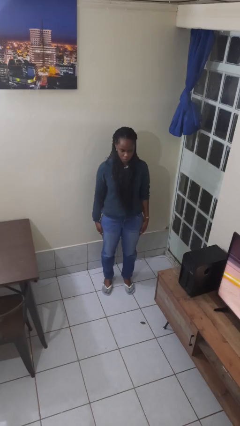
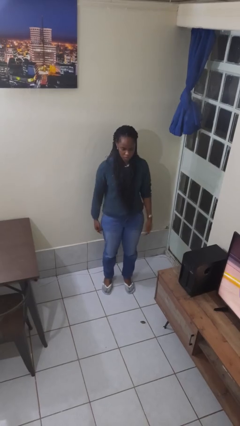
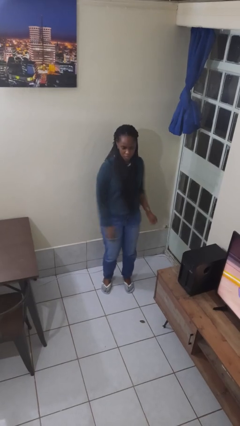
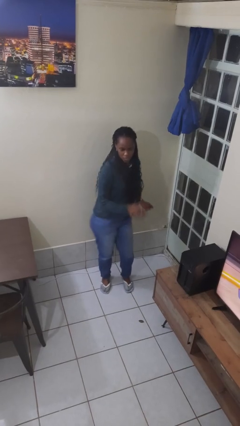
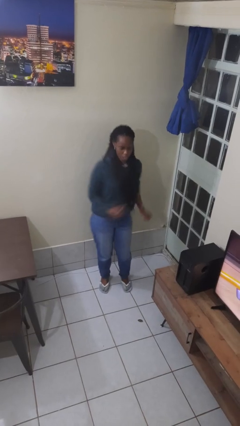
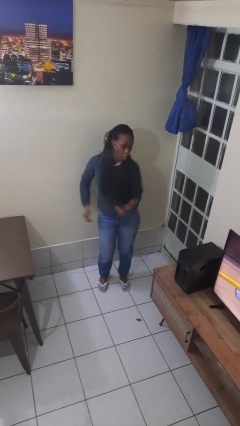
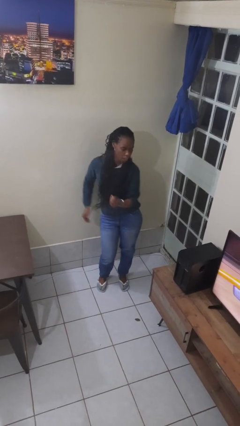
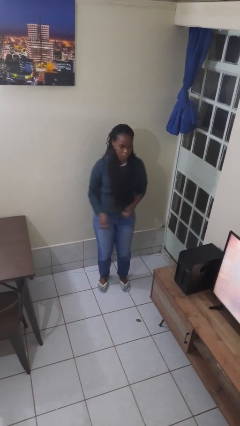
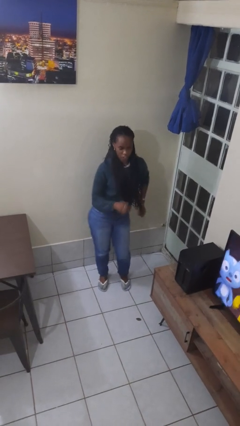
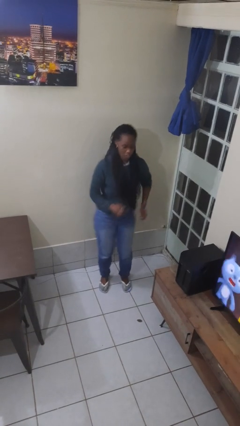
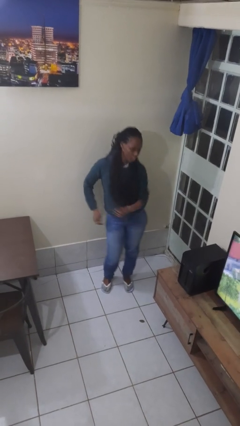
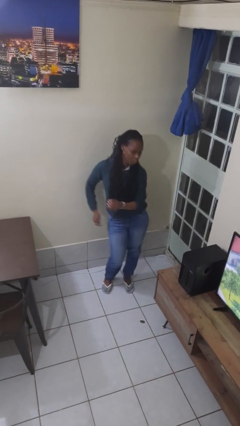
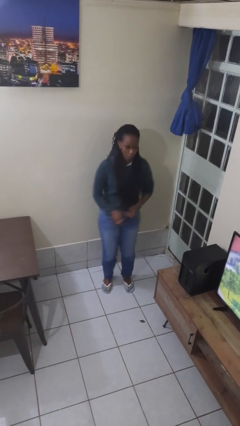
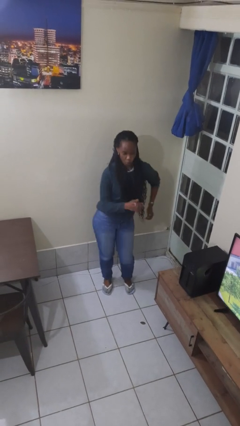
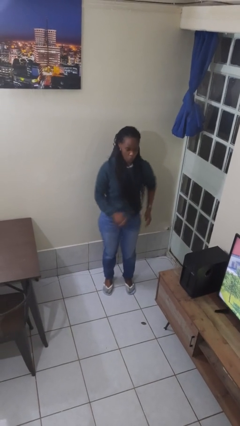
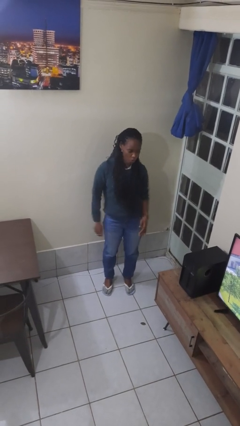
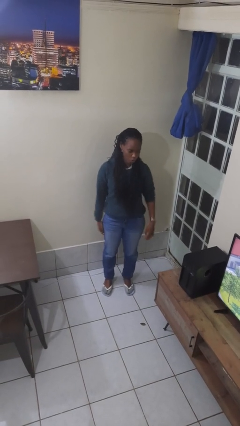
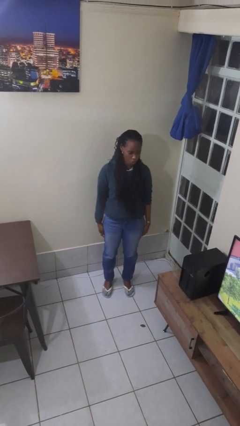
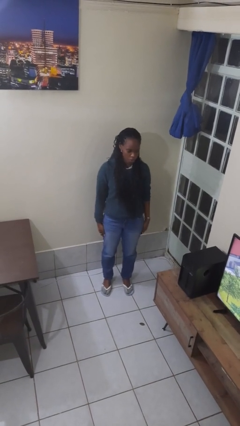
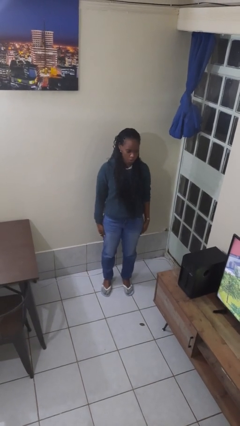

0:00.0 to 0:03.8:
person wiggles hips

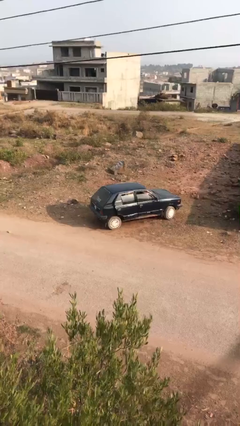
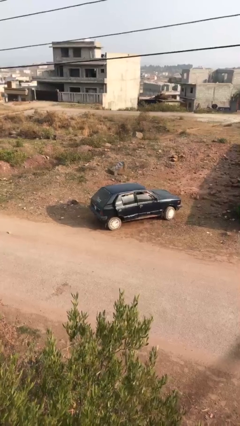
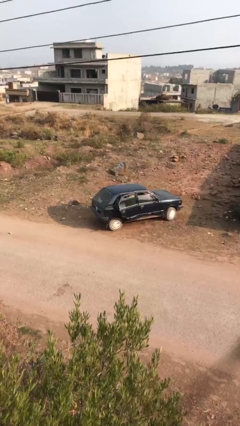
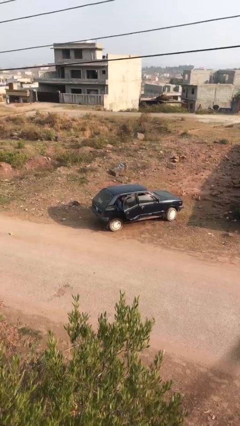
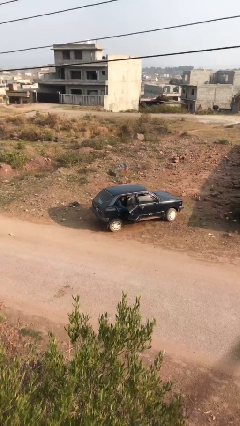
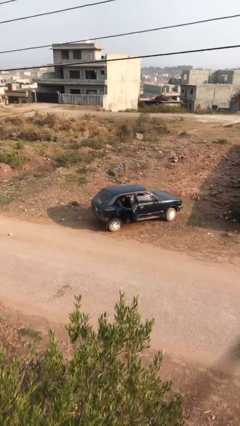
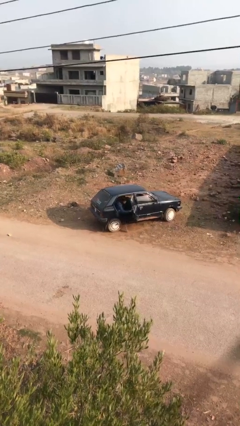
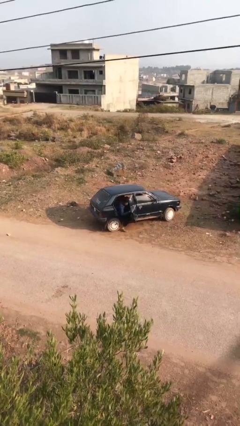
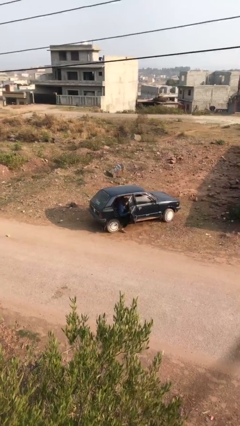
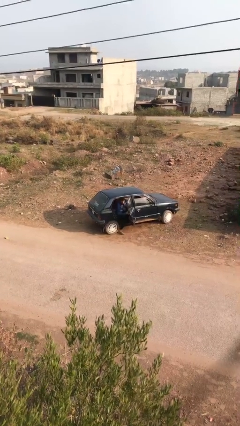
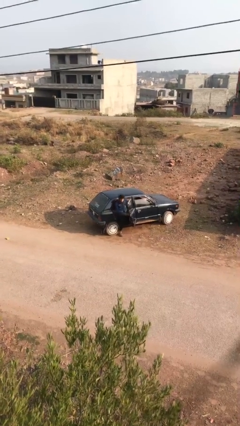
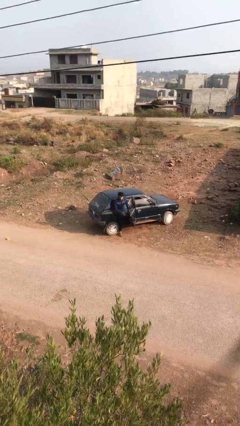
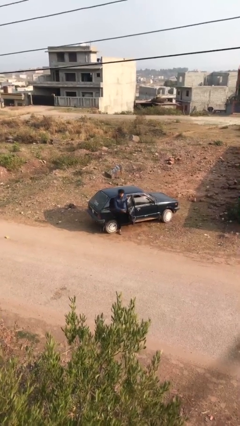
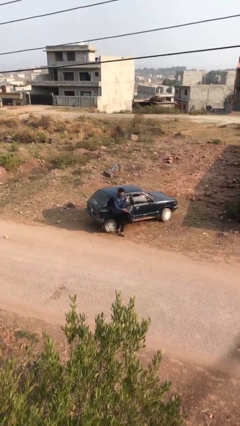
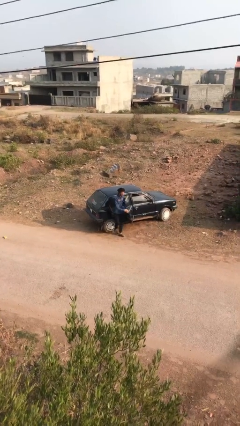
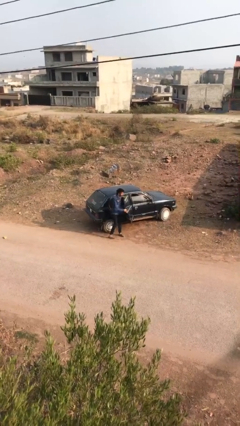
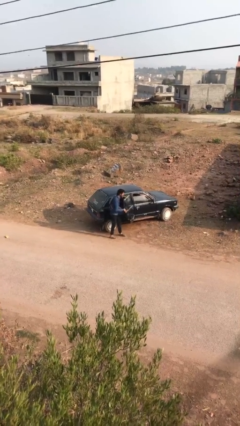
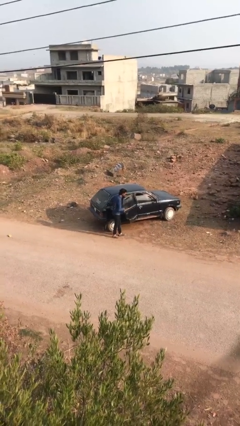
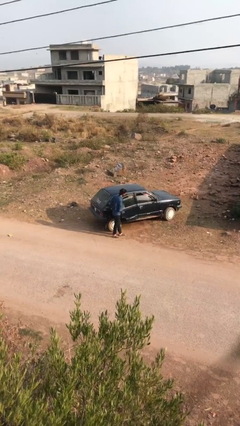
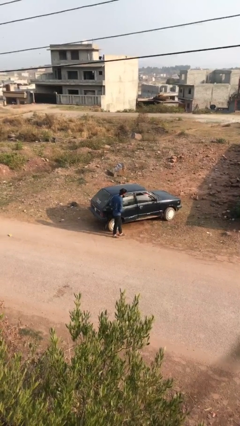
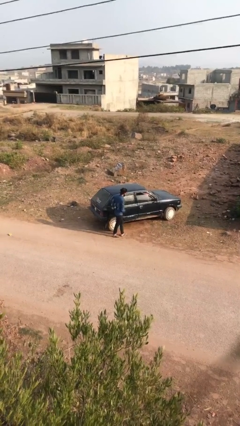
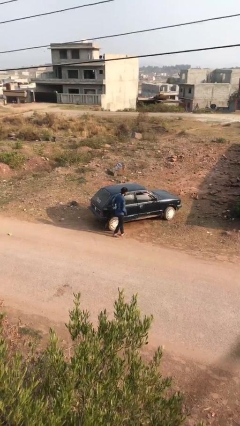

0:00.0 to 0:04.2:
car drops off person

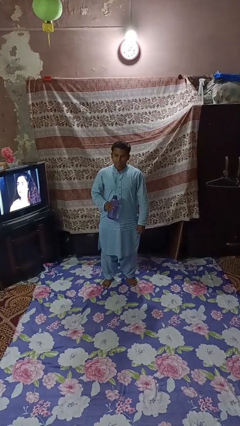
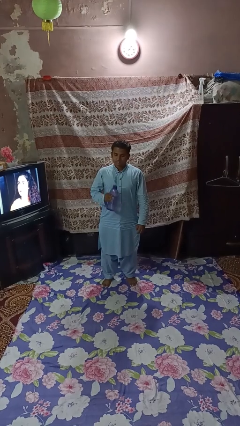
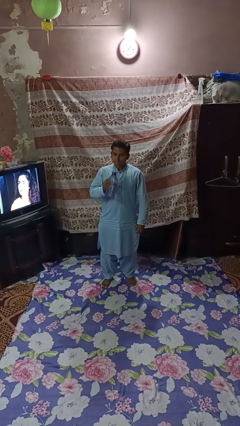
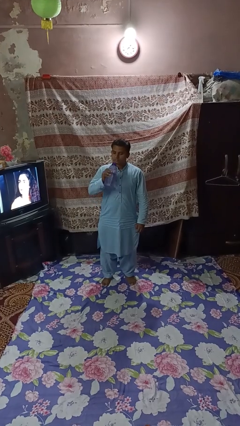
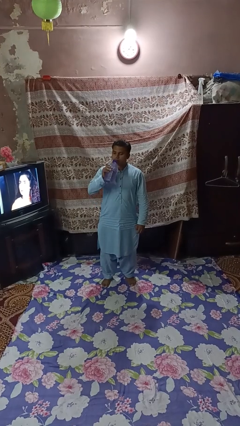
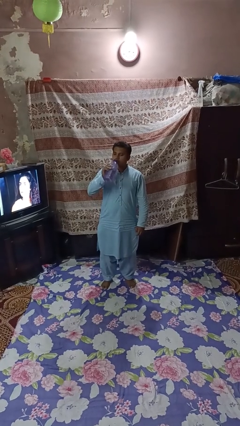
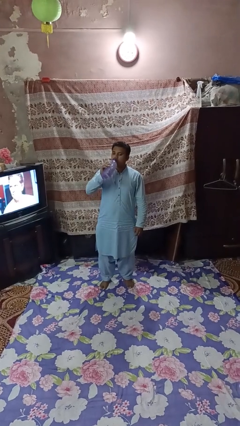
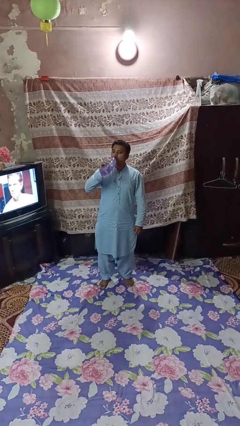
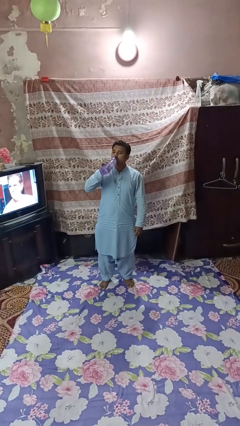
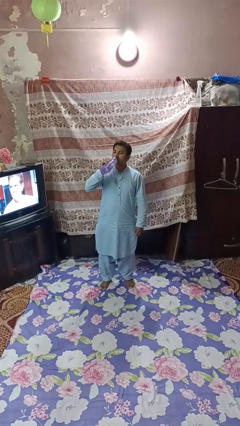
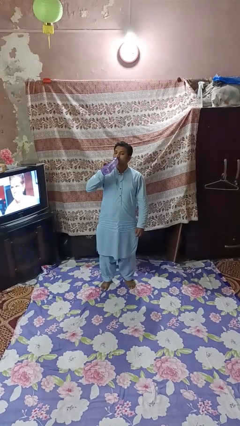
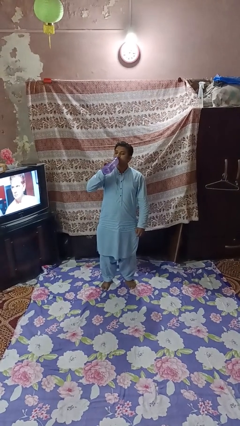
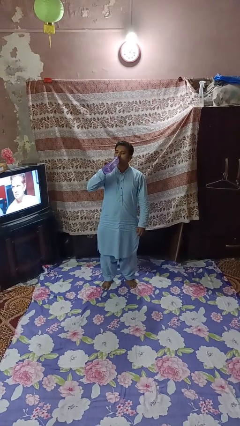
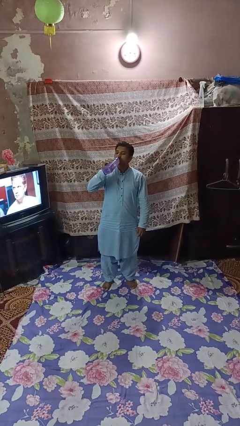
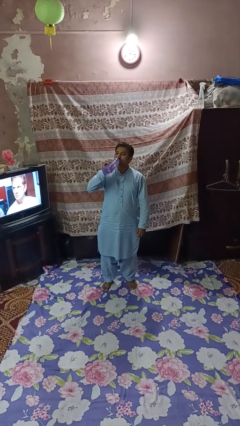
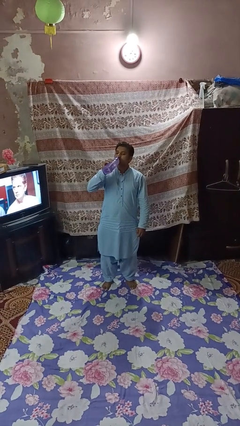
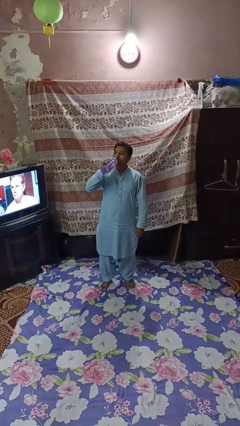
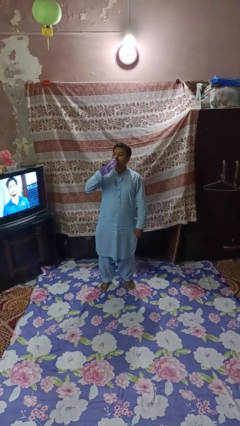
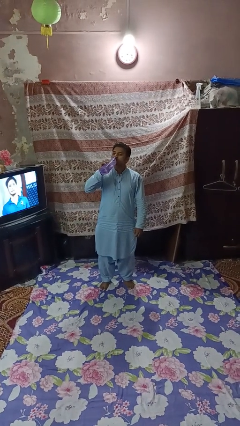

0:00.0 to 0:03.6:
person drinks from bottle

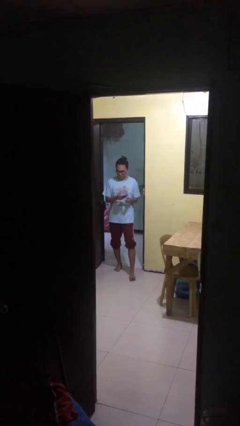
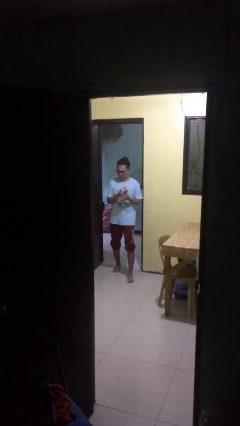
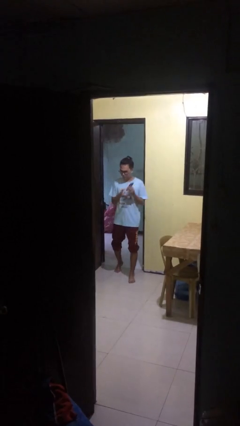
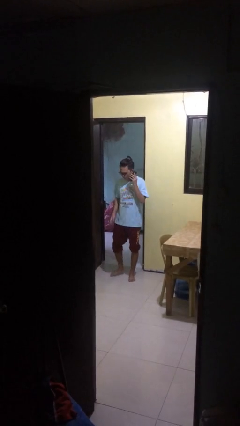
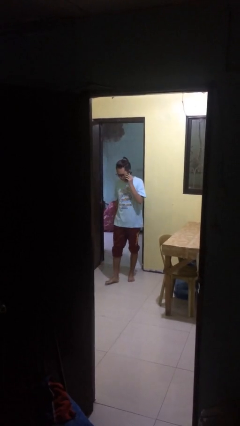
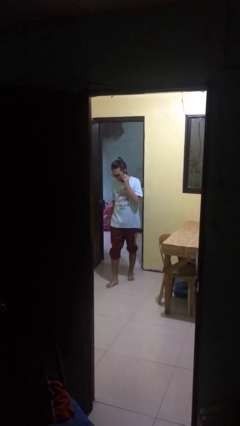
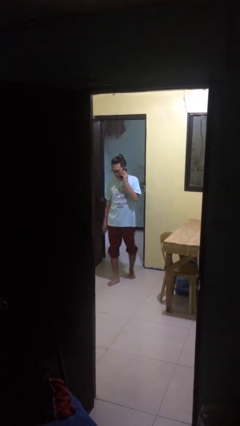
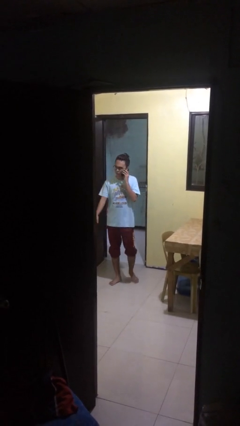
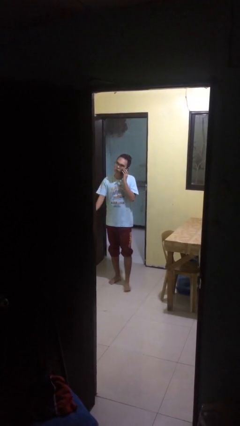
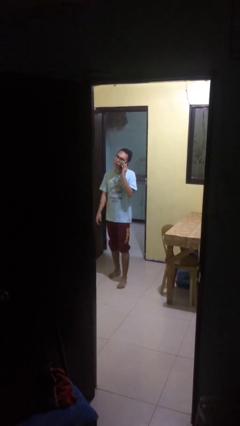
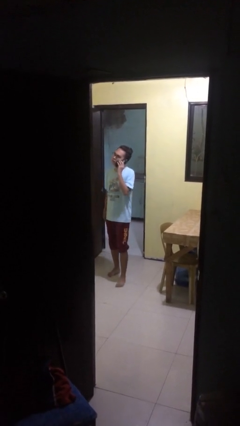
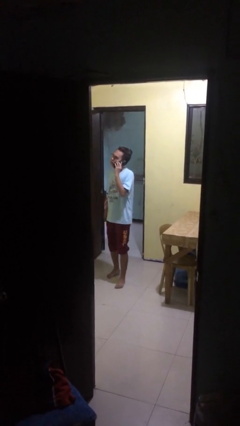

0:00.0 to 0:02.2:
person talks on phone

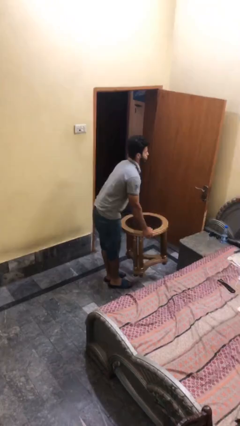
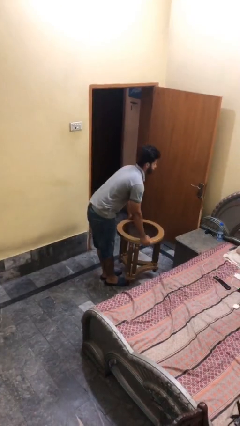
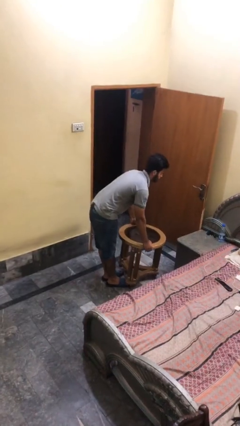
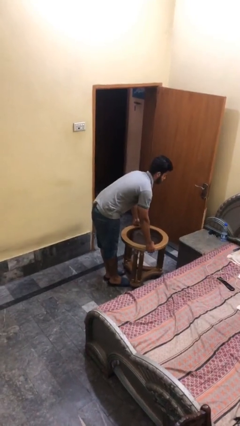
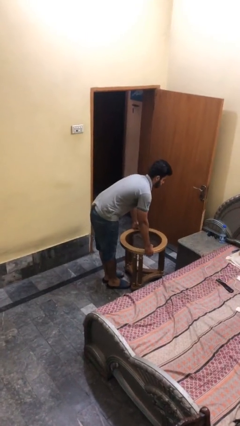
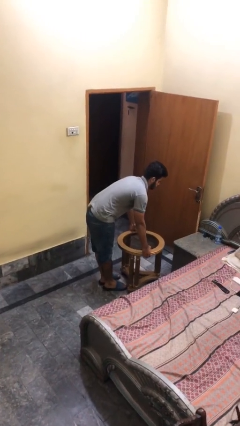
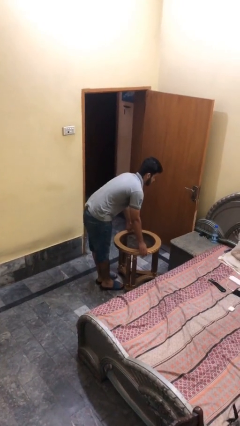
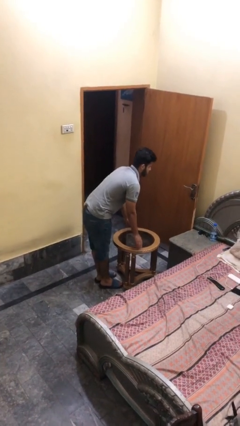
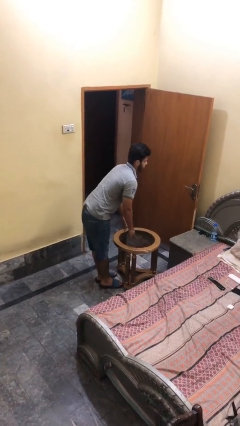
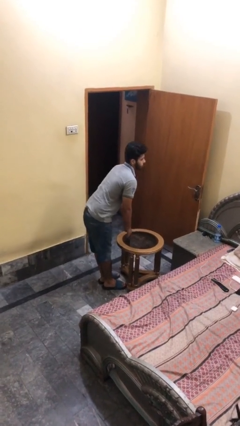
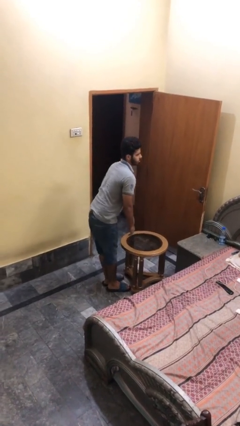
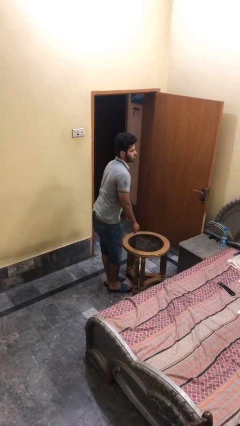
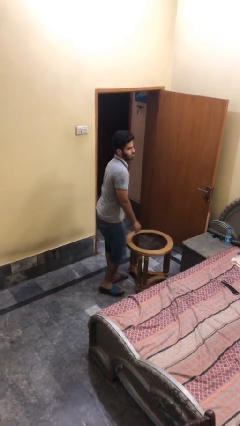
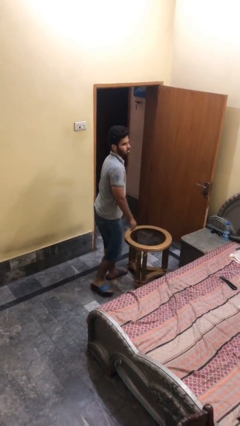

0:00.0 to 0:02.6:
person puts down object on floor

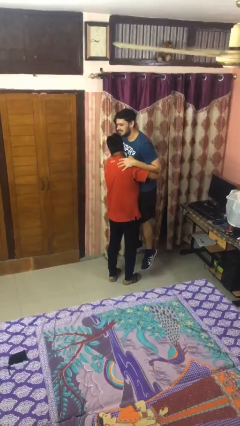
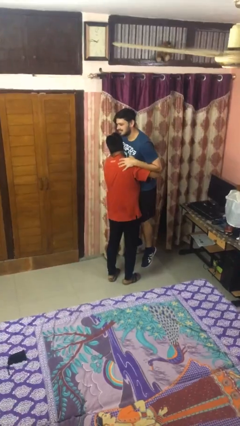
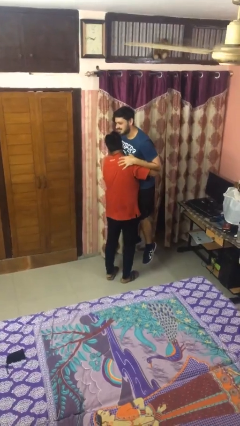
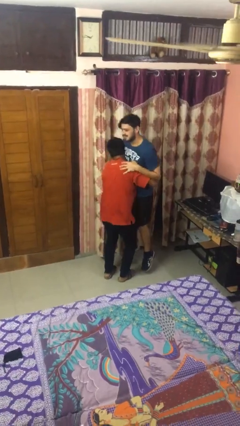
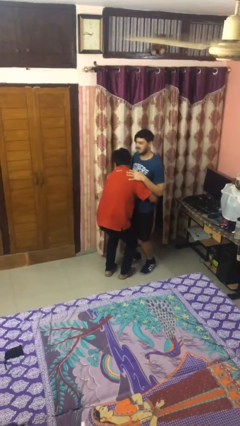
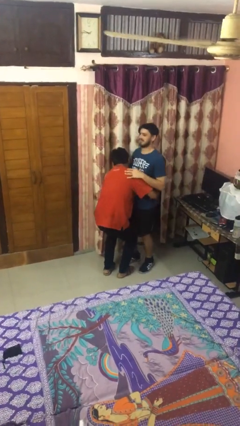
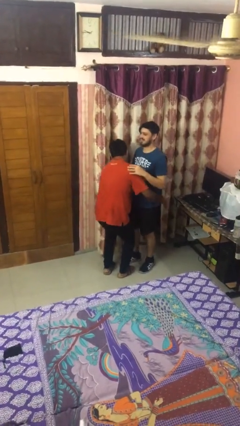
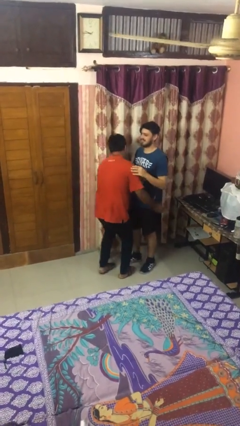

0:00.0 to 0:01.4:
person puts down person
